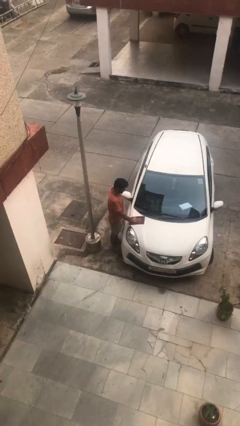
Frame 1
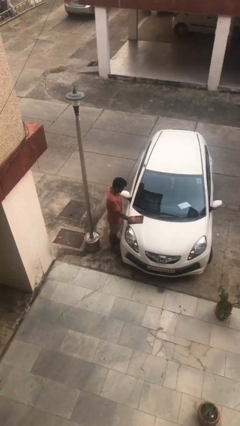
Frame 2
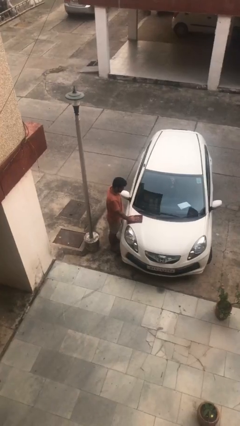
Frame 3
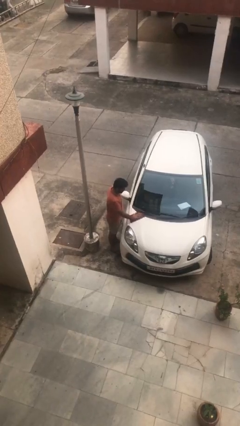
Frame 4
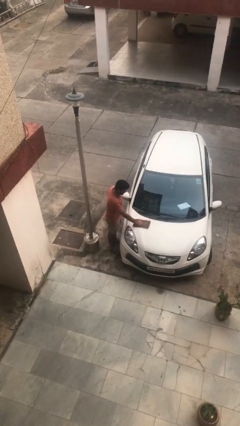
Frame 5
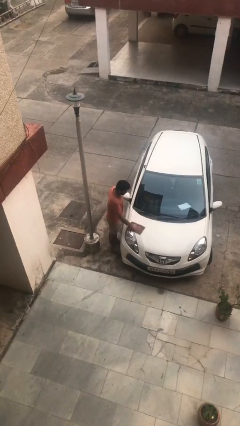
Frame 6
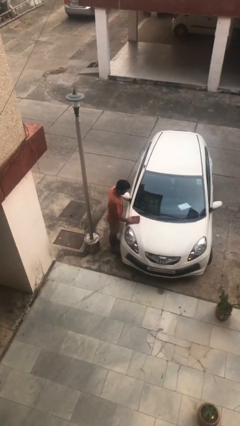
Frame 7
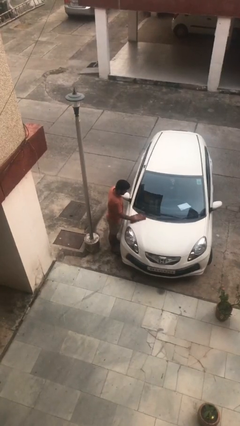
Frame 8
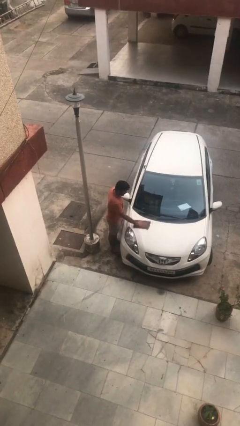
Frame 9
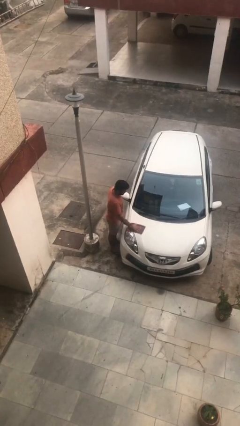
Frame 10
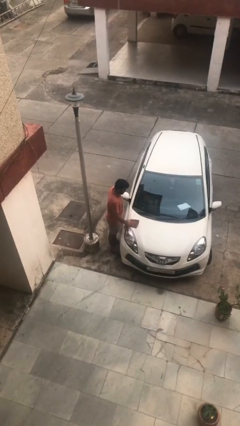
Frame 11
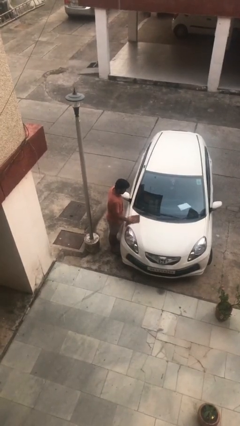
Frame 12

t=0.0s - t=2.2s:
person polishes car with rag

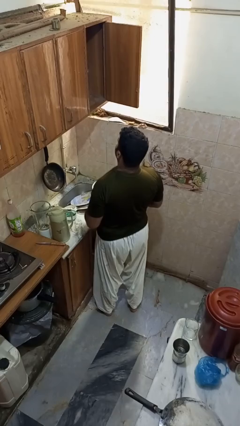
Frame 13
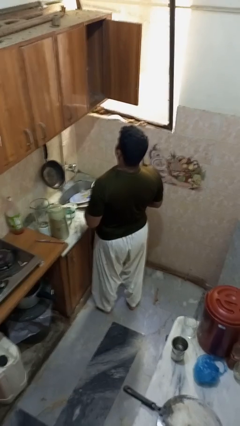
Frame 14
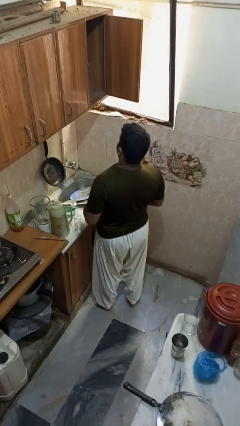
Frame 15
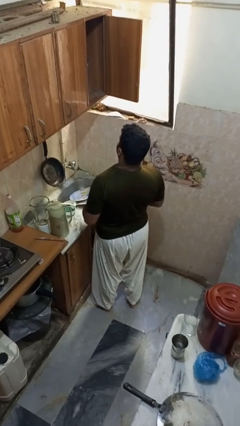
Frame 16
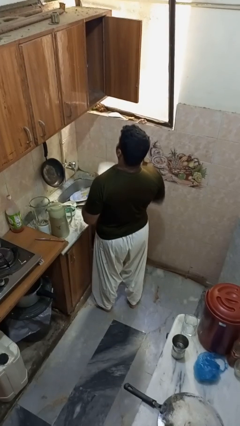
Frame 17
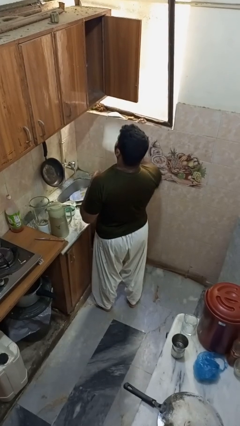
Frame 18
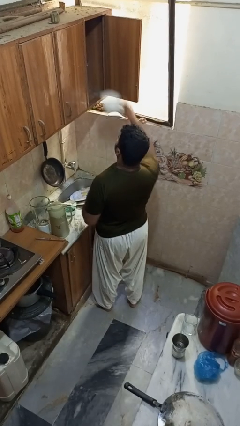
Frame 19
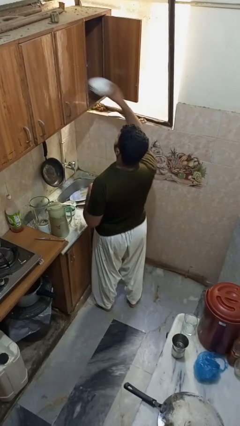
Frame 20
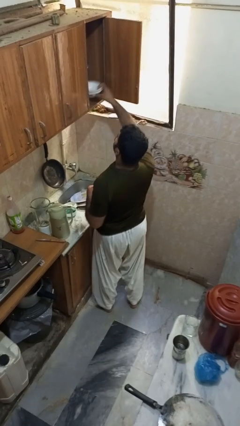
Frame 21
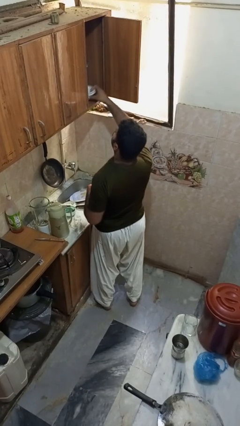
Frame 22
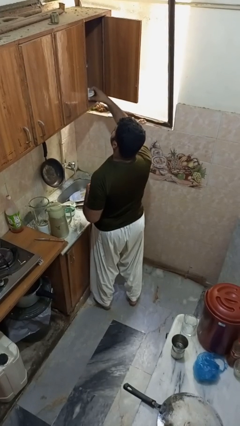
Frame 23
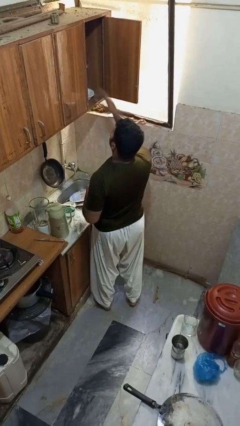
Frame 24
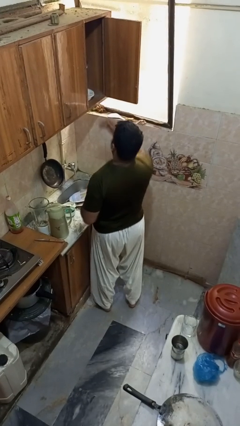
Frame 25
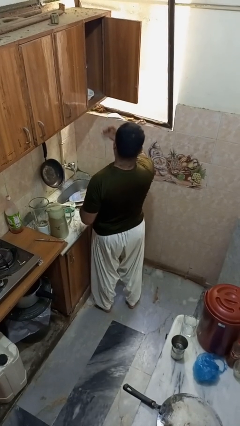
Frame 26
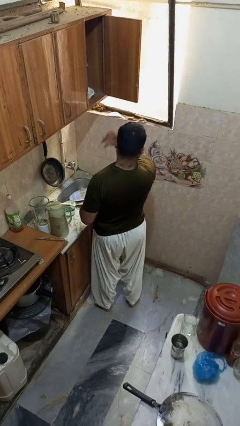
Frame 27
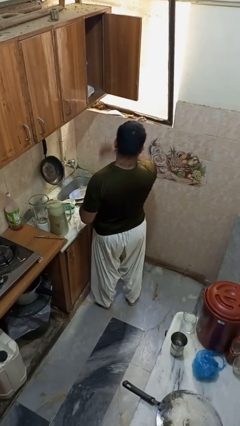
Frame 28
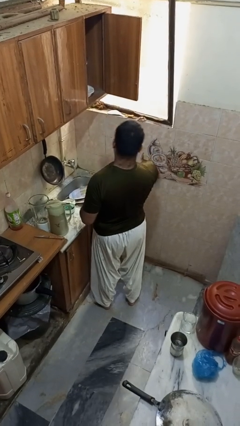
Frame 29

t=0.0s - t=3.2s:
person puts object in cabinet

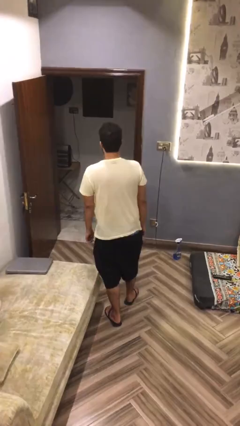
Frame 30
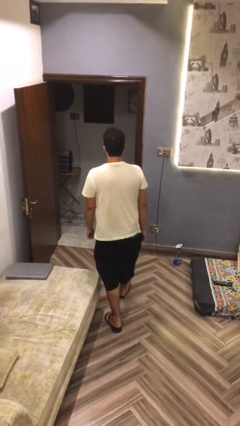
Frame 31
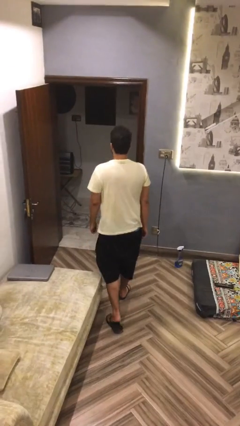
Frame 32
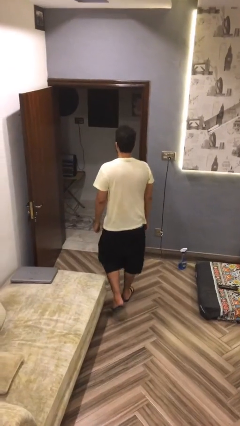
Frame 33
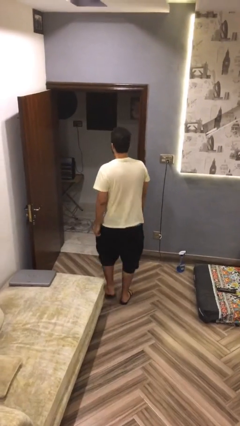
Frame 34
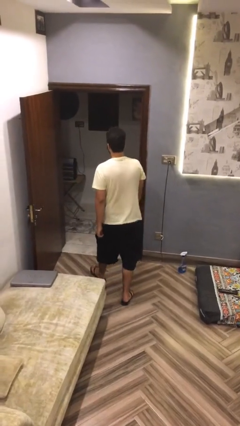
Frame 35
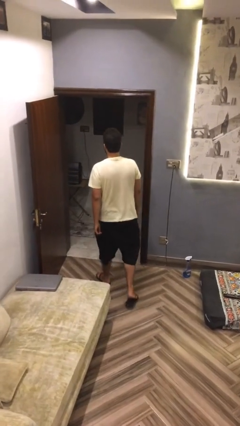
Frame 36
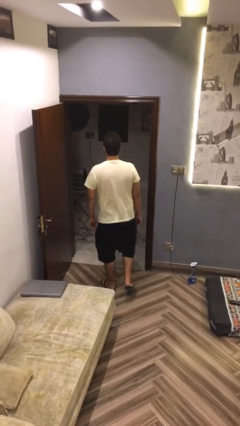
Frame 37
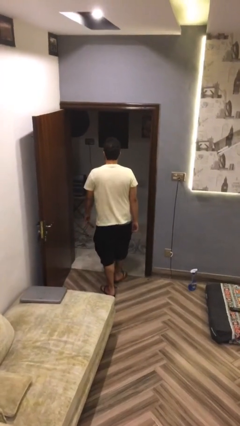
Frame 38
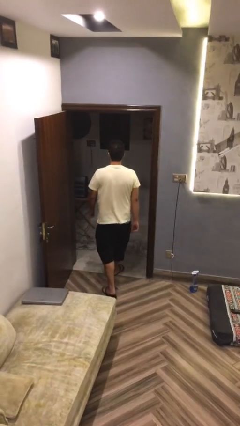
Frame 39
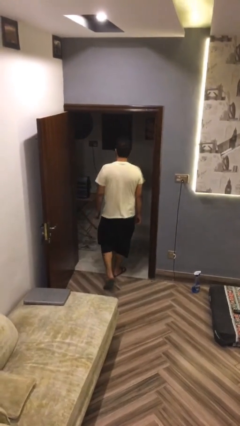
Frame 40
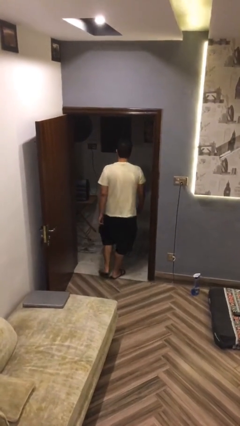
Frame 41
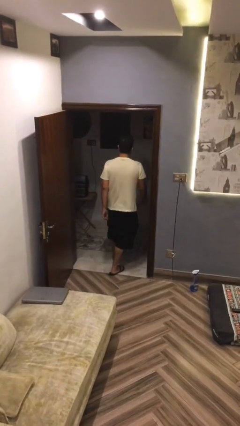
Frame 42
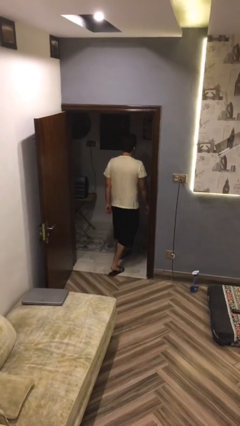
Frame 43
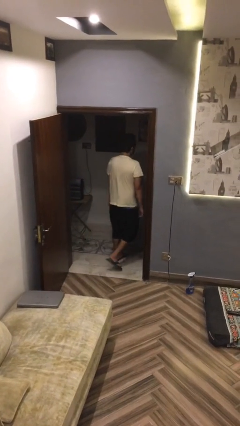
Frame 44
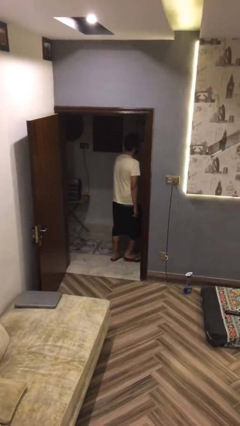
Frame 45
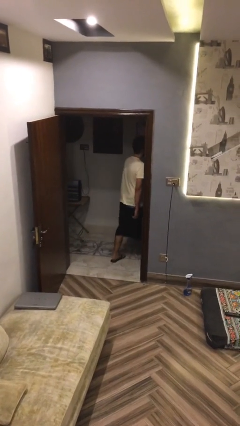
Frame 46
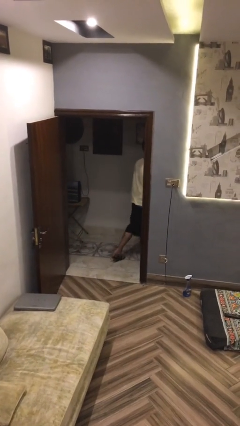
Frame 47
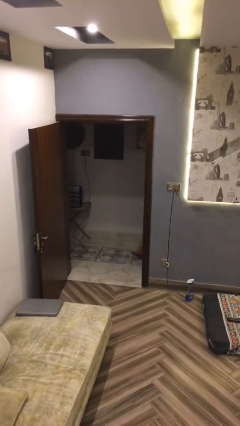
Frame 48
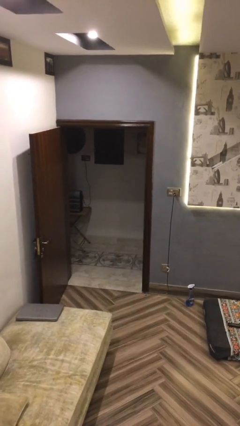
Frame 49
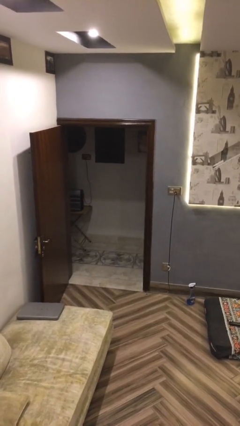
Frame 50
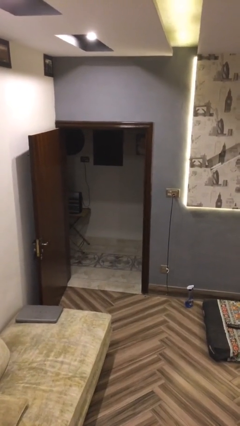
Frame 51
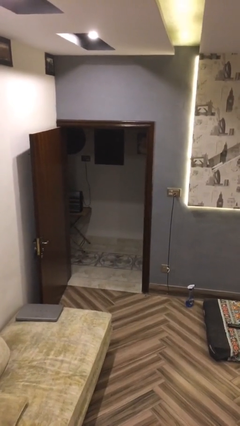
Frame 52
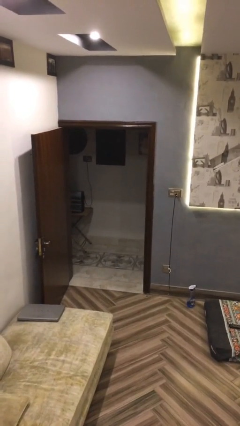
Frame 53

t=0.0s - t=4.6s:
person exits scene through structure

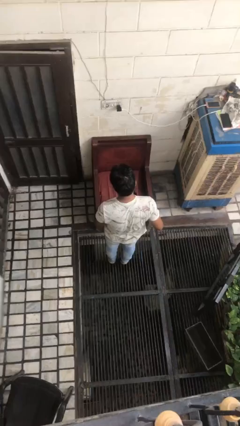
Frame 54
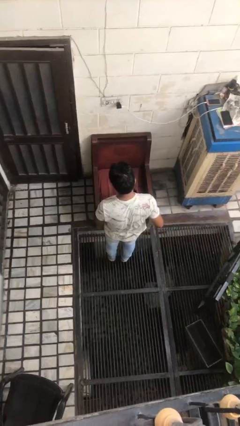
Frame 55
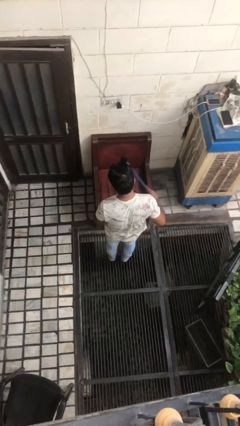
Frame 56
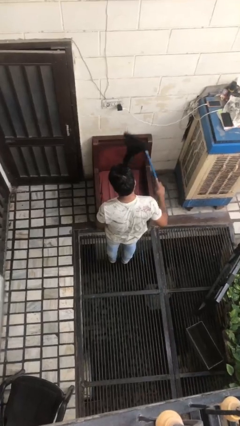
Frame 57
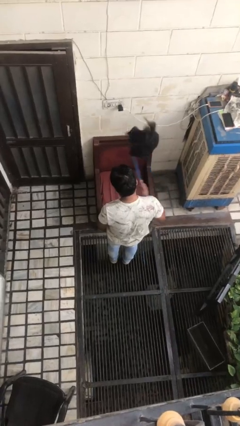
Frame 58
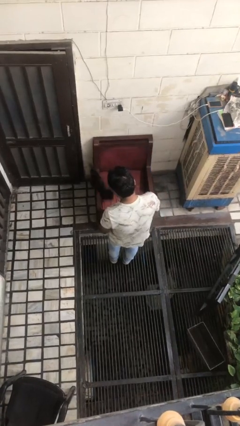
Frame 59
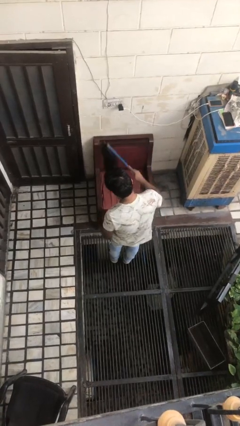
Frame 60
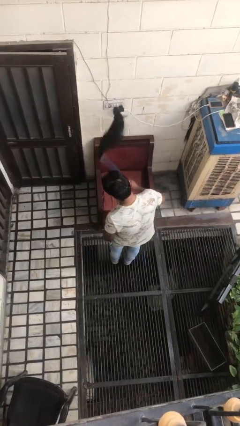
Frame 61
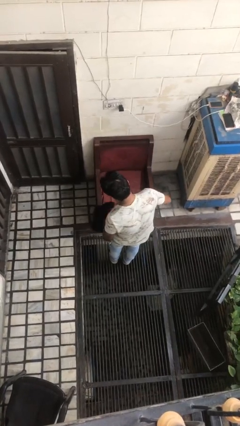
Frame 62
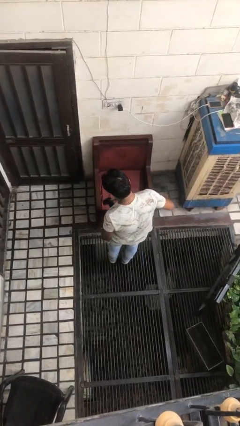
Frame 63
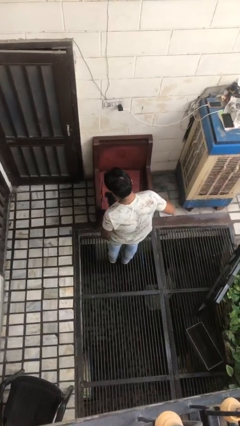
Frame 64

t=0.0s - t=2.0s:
person dusts furniture

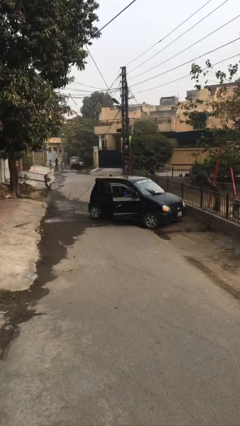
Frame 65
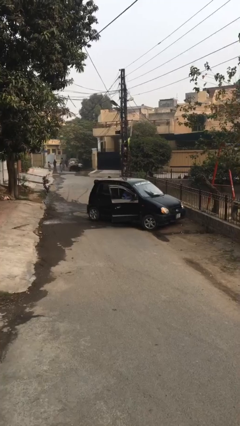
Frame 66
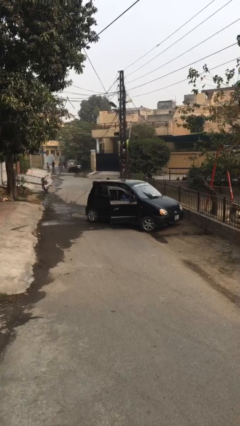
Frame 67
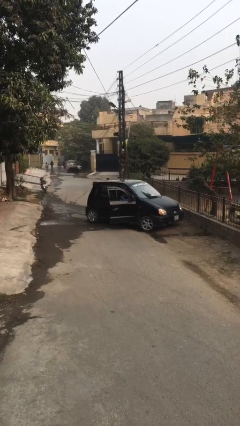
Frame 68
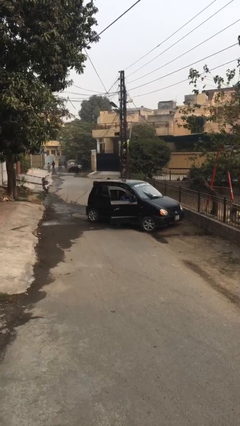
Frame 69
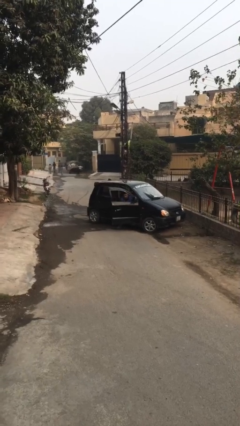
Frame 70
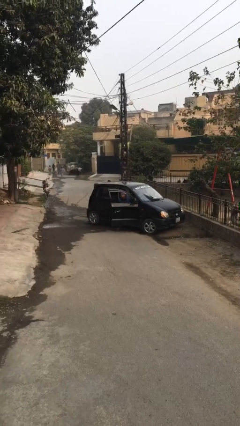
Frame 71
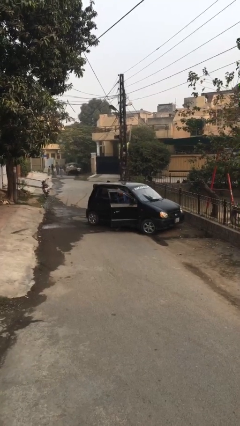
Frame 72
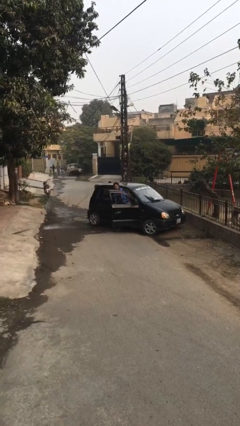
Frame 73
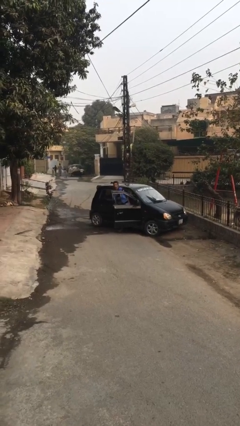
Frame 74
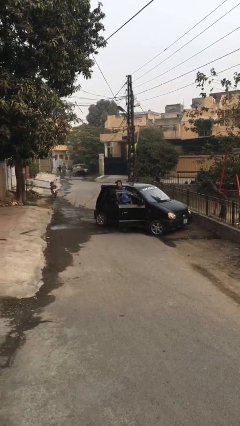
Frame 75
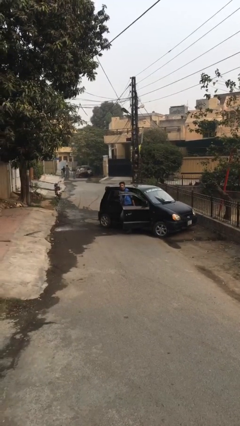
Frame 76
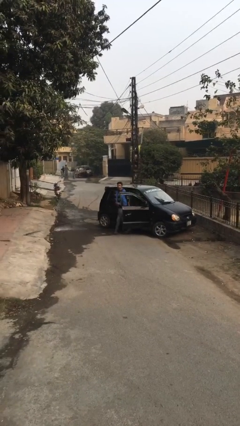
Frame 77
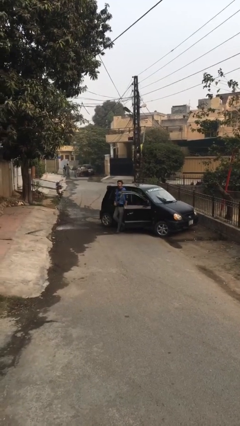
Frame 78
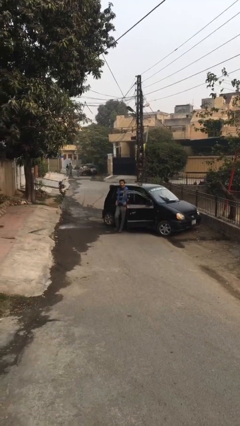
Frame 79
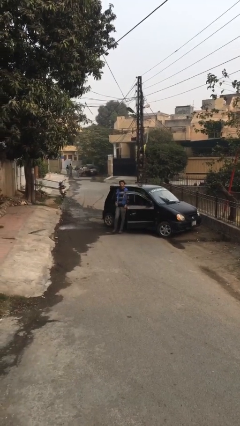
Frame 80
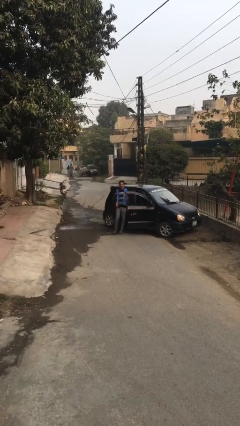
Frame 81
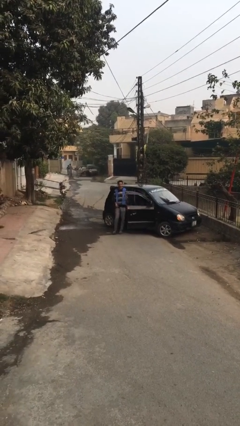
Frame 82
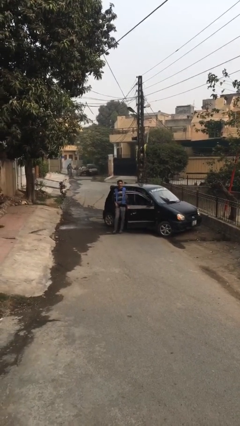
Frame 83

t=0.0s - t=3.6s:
person exits car

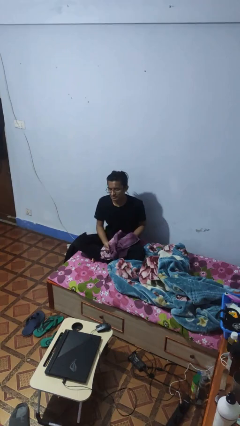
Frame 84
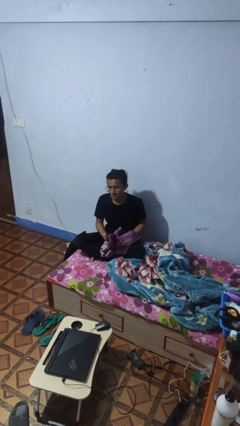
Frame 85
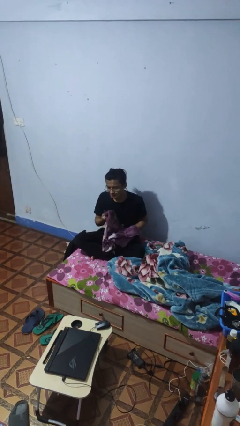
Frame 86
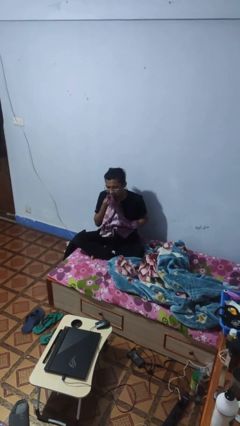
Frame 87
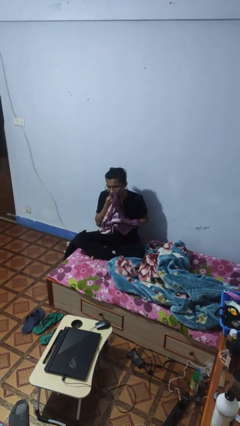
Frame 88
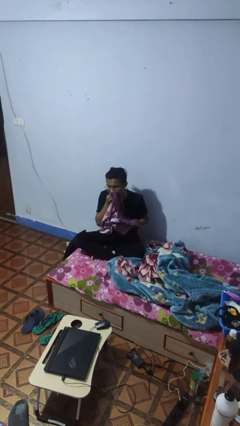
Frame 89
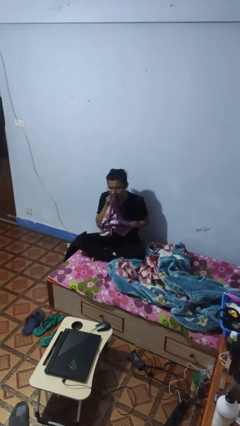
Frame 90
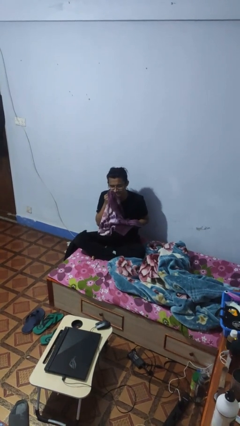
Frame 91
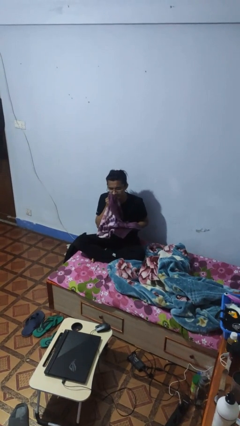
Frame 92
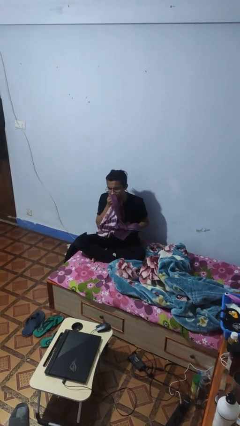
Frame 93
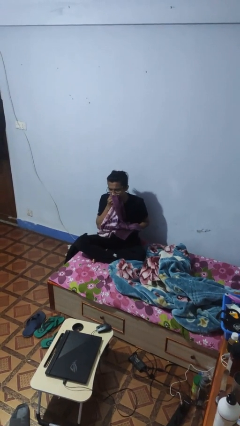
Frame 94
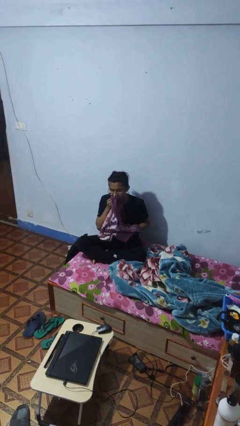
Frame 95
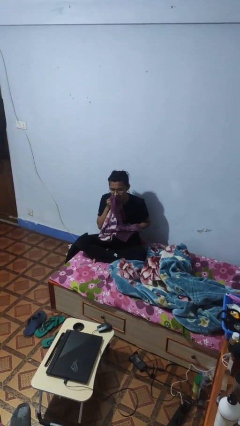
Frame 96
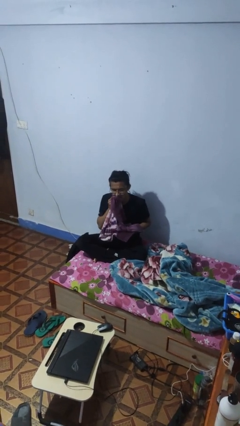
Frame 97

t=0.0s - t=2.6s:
person wipes mouth with napkin
